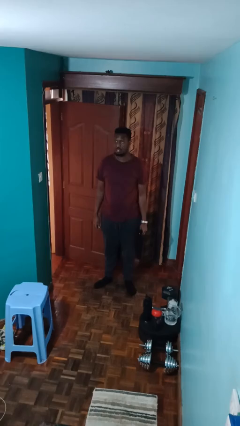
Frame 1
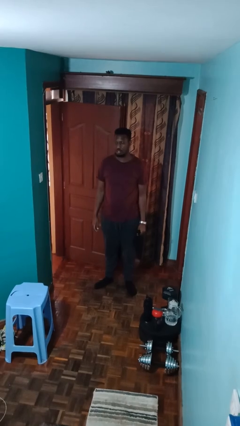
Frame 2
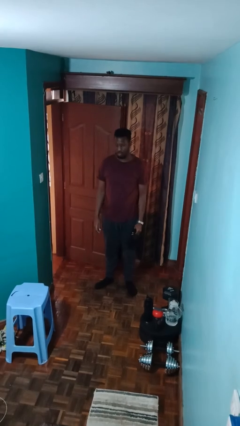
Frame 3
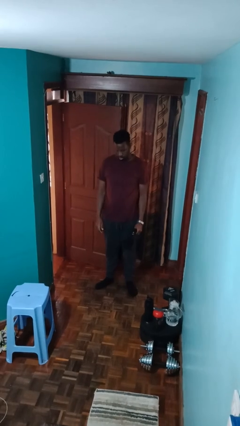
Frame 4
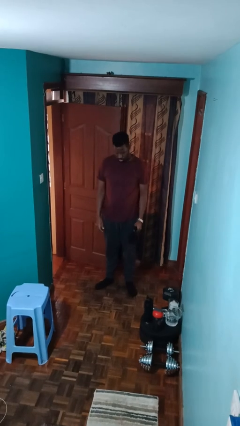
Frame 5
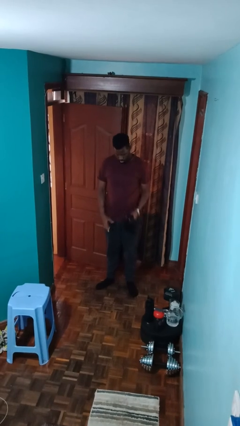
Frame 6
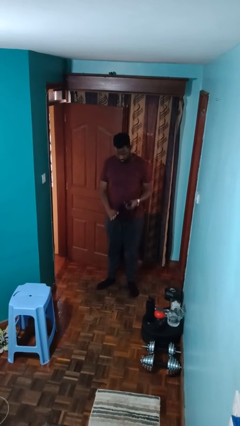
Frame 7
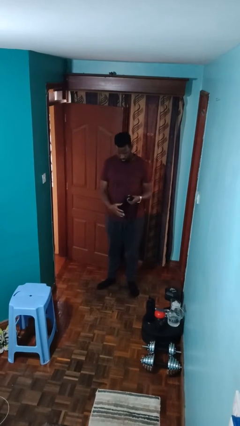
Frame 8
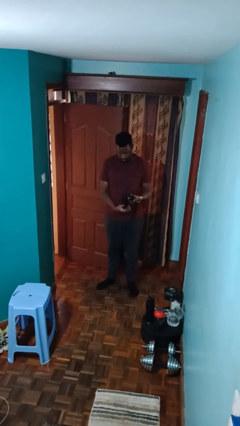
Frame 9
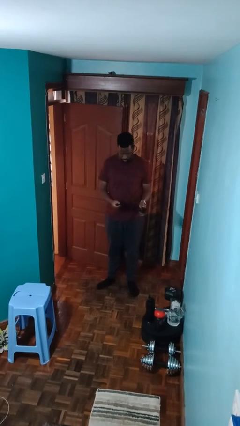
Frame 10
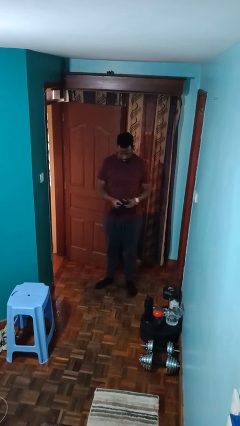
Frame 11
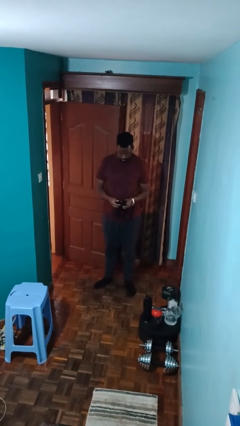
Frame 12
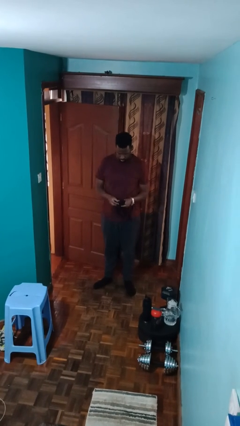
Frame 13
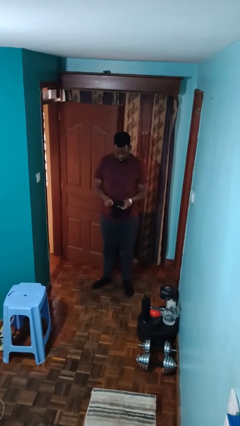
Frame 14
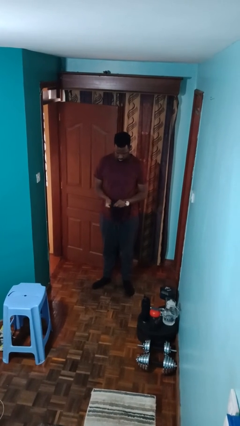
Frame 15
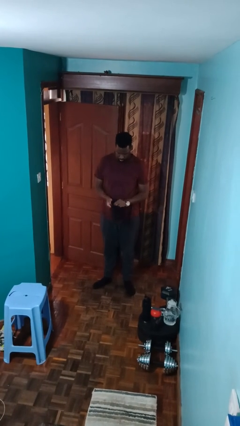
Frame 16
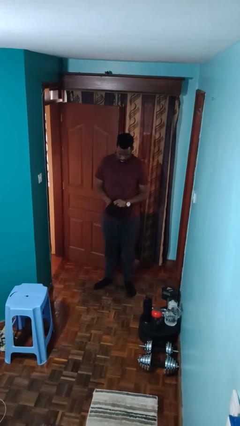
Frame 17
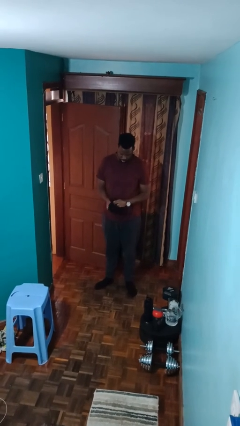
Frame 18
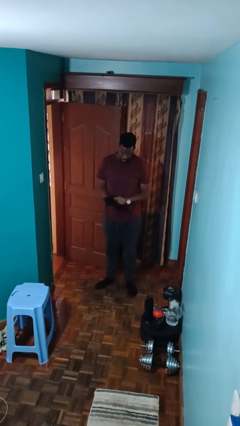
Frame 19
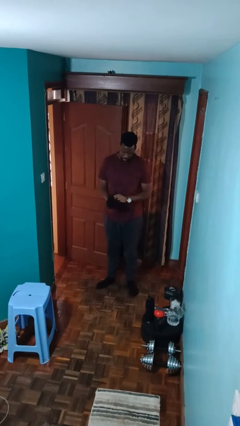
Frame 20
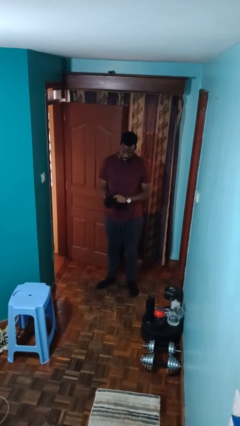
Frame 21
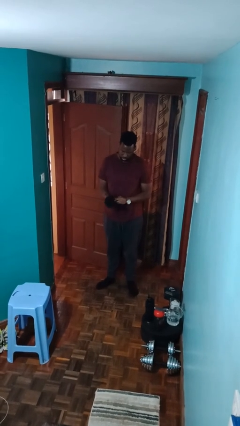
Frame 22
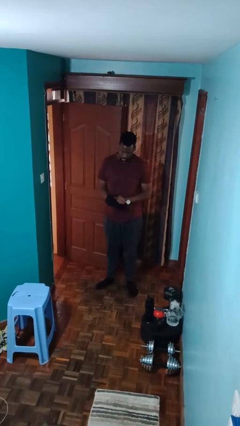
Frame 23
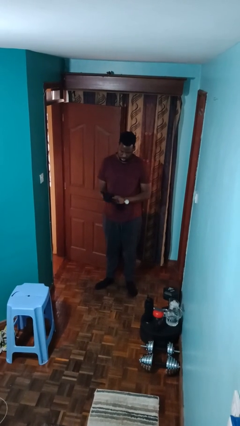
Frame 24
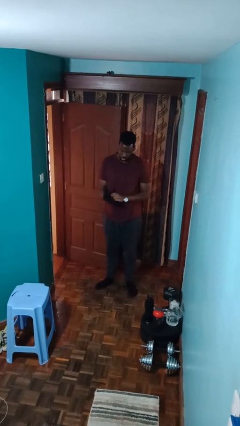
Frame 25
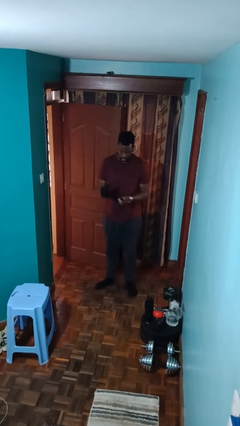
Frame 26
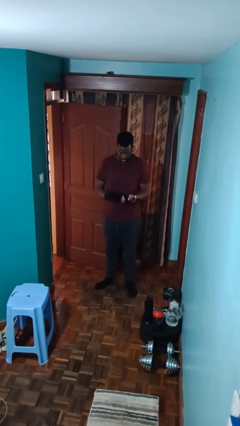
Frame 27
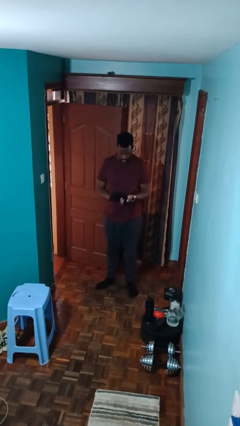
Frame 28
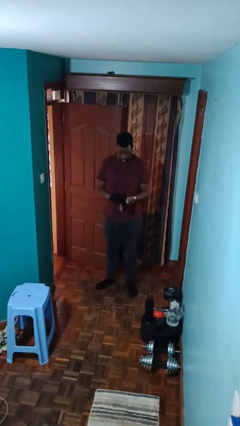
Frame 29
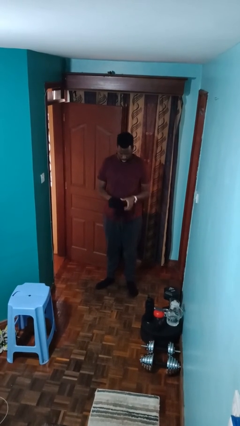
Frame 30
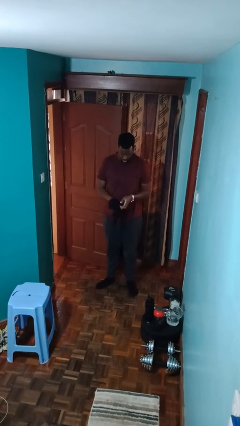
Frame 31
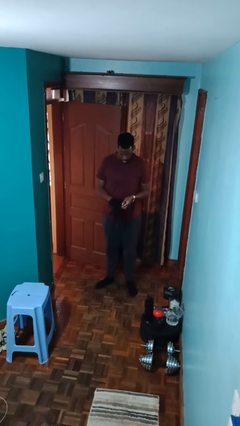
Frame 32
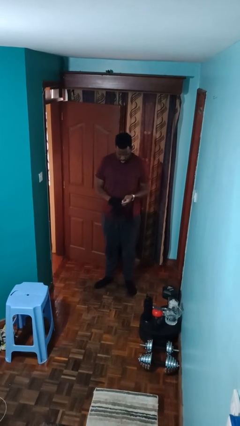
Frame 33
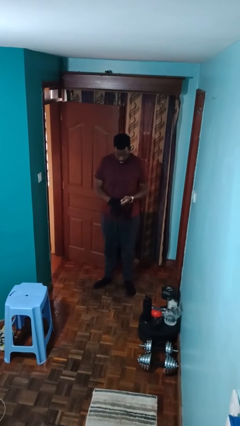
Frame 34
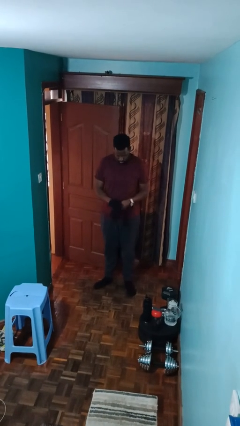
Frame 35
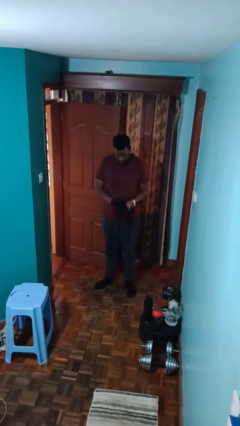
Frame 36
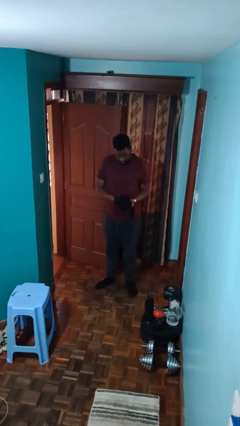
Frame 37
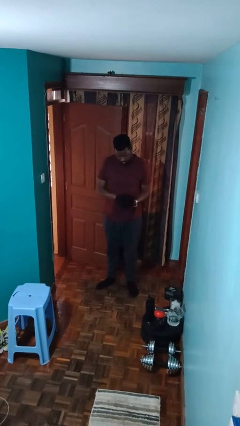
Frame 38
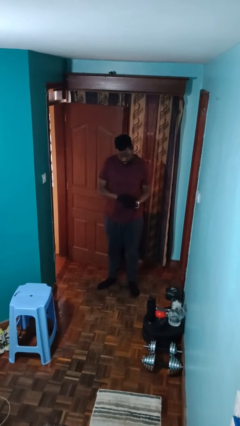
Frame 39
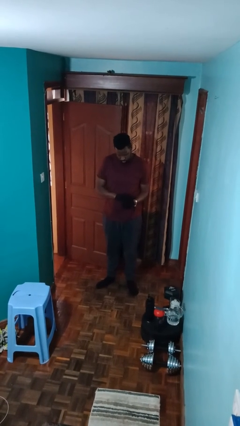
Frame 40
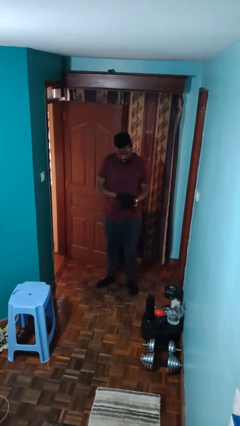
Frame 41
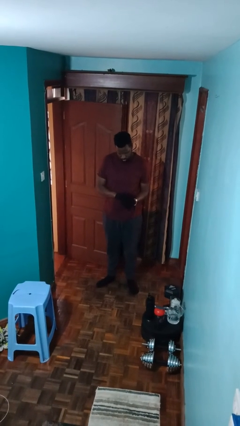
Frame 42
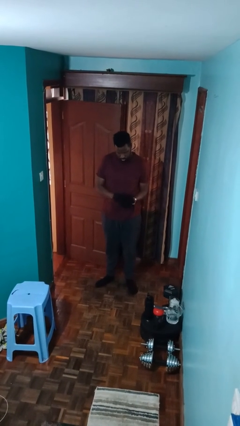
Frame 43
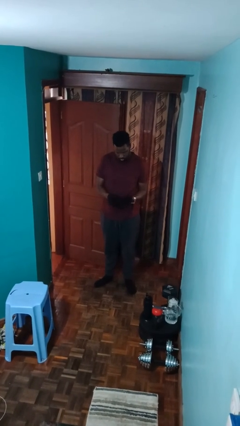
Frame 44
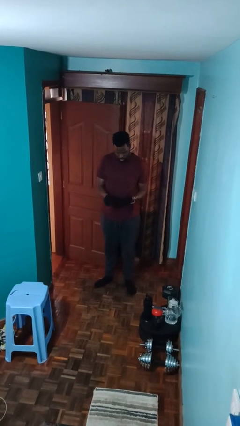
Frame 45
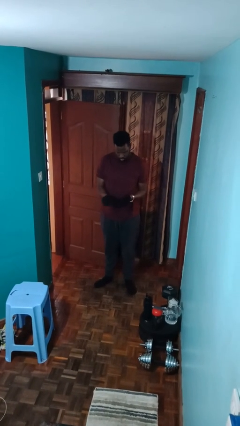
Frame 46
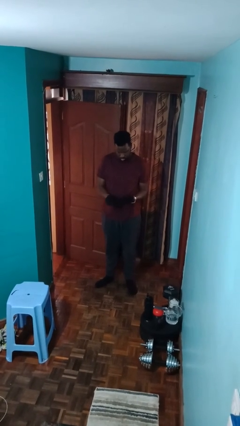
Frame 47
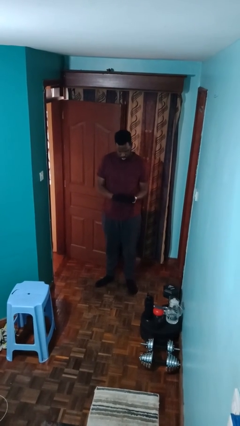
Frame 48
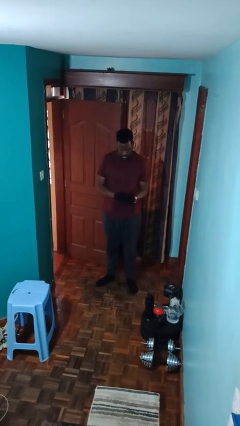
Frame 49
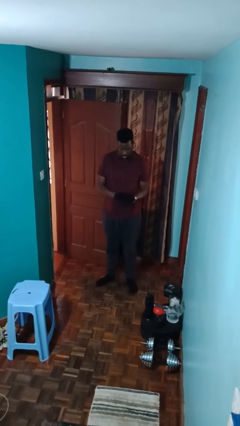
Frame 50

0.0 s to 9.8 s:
person puts on gloves

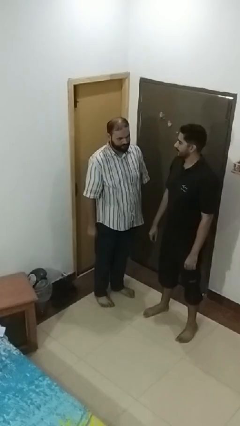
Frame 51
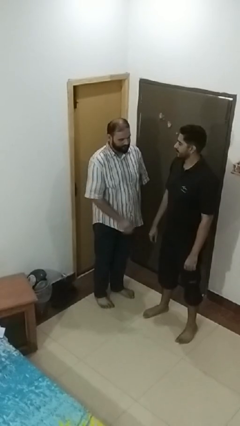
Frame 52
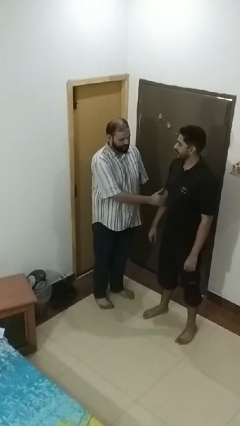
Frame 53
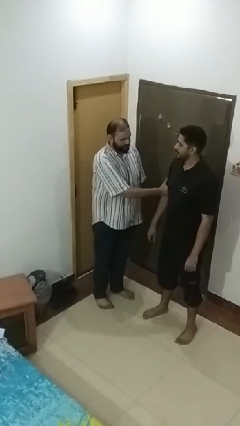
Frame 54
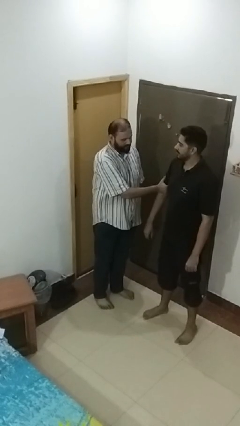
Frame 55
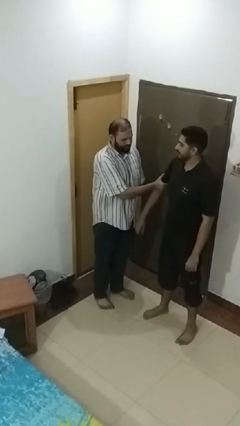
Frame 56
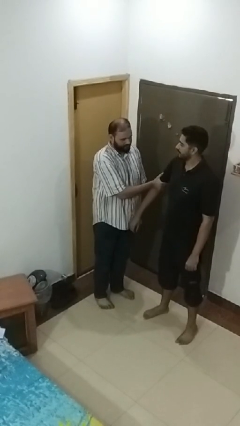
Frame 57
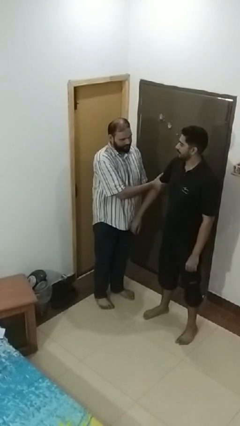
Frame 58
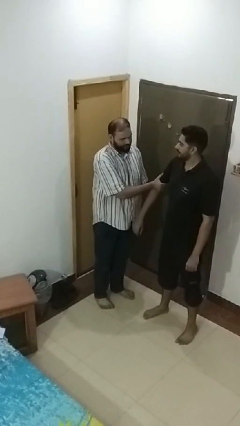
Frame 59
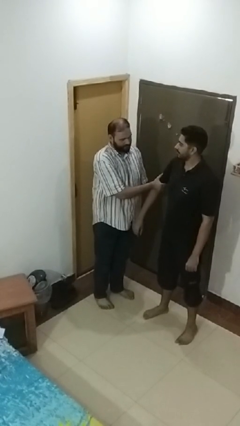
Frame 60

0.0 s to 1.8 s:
person grabs person by bicep

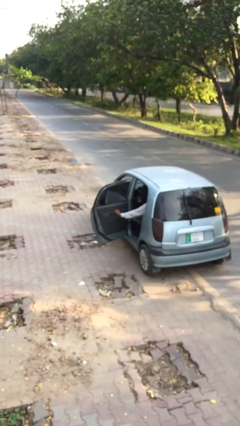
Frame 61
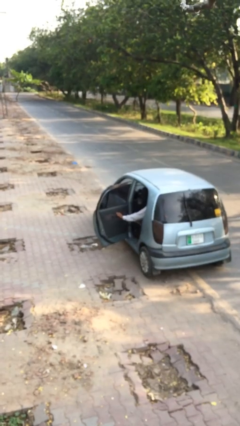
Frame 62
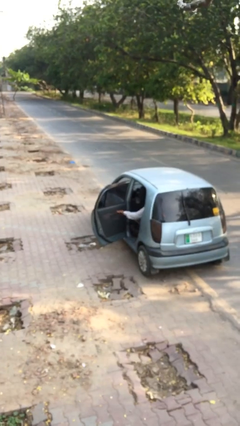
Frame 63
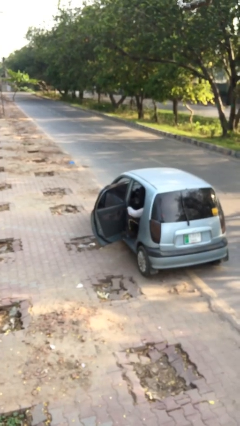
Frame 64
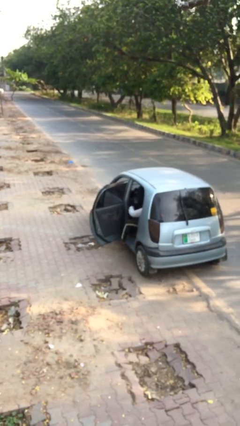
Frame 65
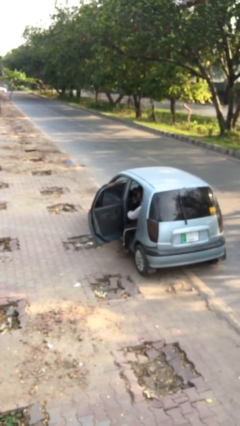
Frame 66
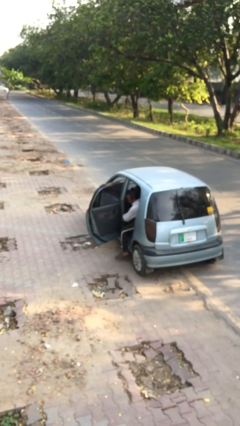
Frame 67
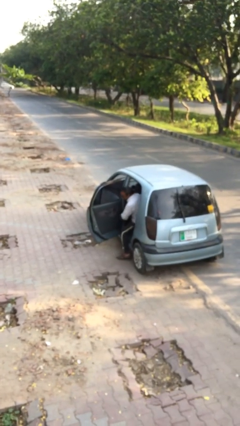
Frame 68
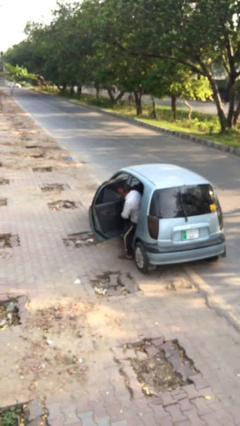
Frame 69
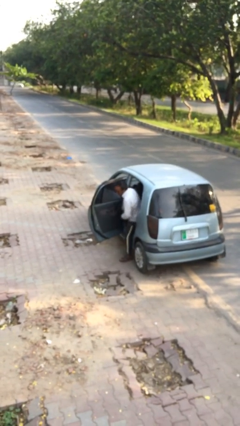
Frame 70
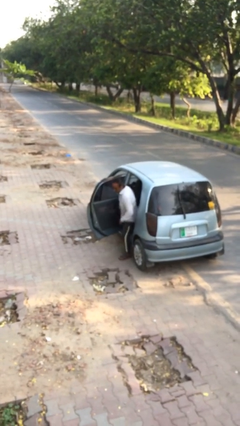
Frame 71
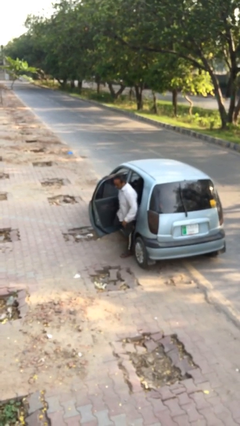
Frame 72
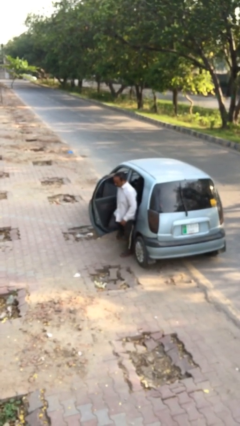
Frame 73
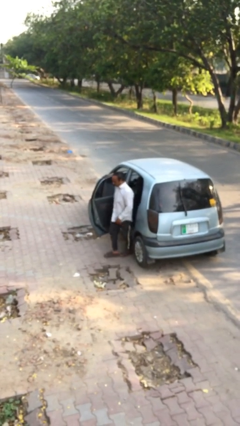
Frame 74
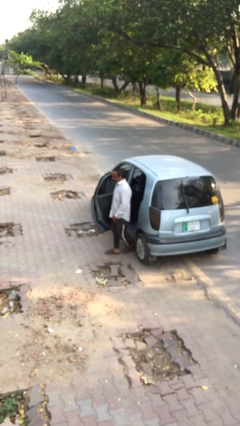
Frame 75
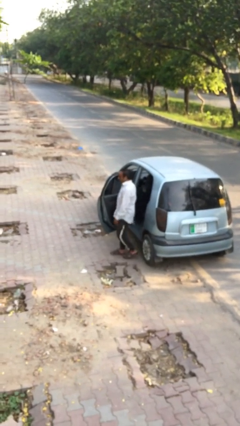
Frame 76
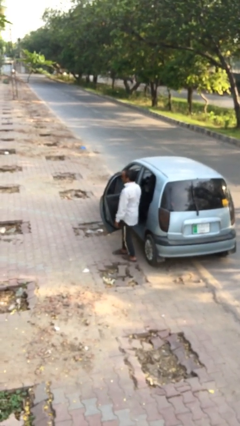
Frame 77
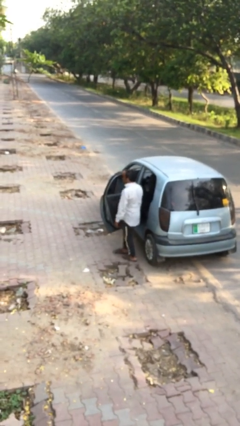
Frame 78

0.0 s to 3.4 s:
person exits car

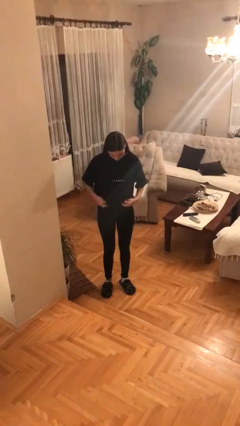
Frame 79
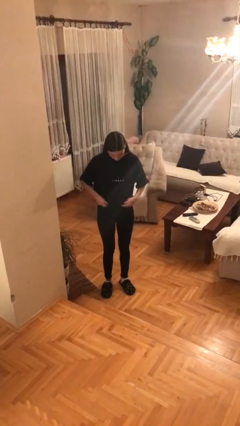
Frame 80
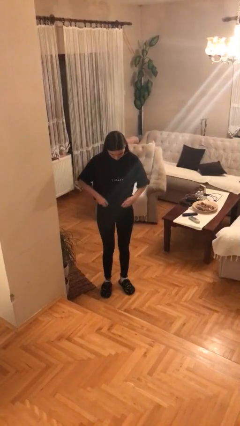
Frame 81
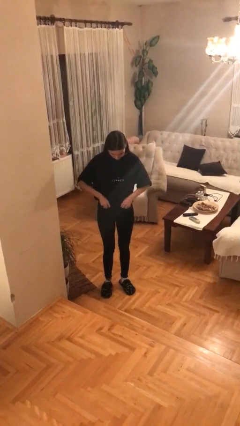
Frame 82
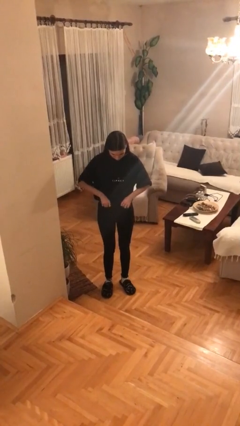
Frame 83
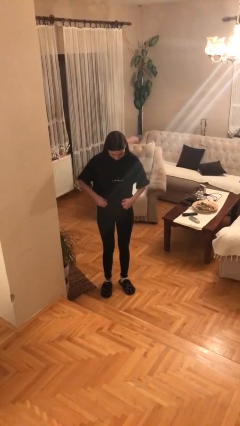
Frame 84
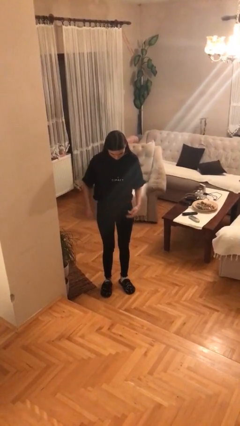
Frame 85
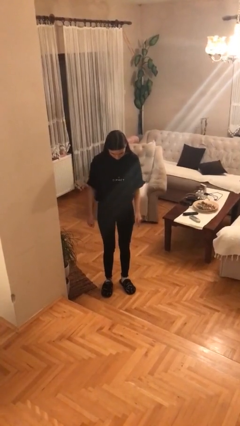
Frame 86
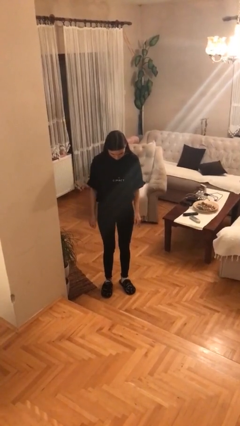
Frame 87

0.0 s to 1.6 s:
person tucks in shirt

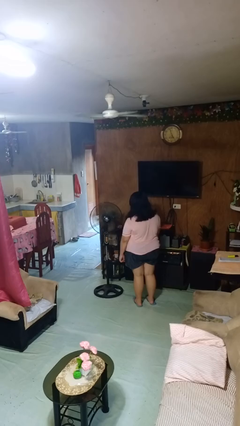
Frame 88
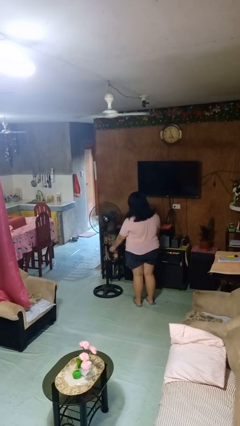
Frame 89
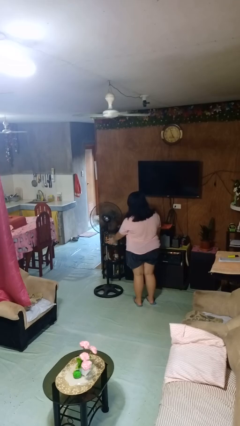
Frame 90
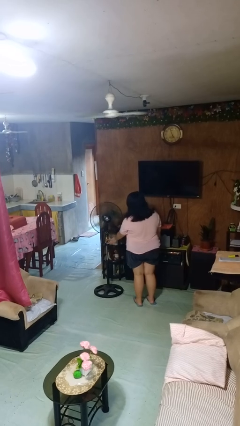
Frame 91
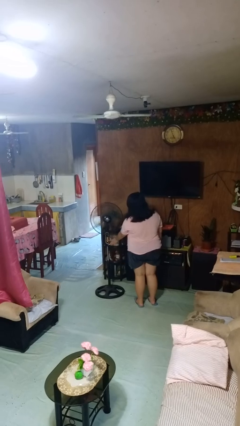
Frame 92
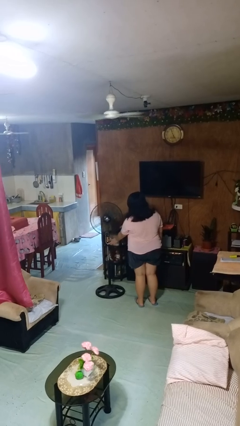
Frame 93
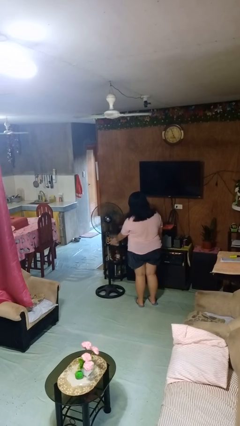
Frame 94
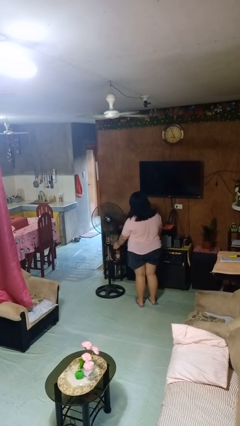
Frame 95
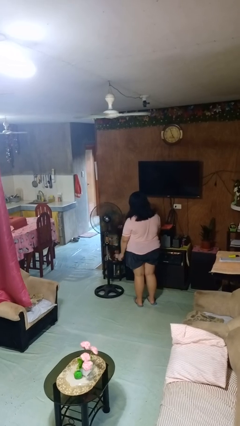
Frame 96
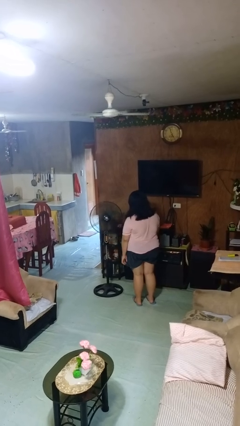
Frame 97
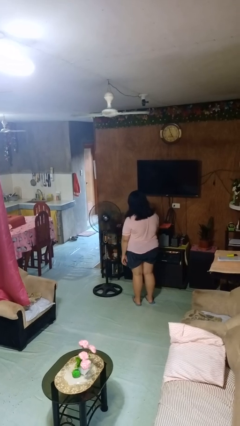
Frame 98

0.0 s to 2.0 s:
person turns on fan
